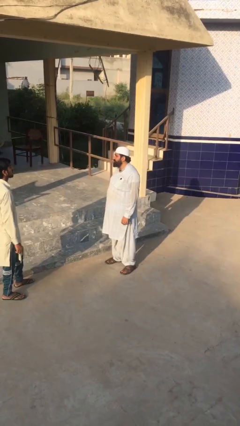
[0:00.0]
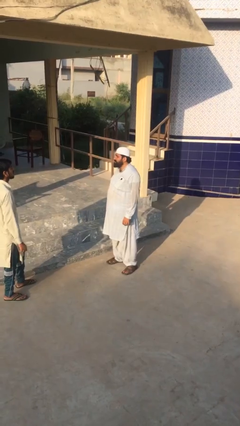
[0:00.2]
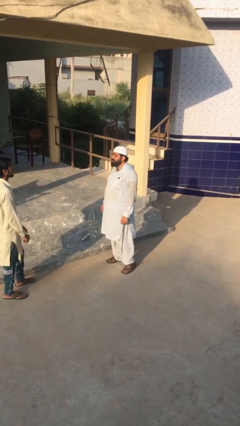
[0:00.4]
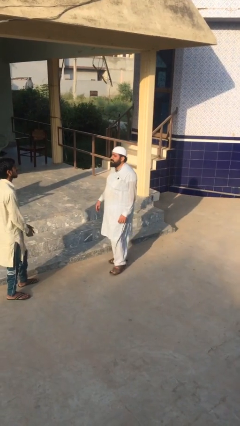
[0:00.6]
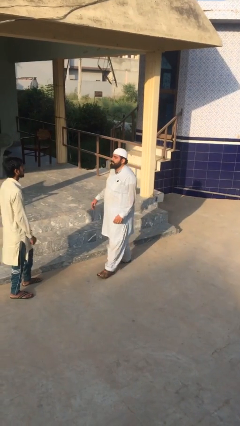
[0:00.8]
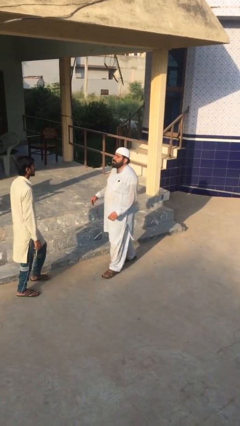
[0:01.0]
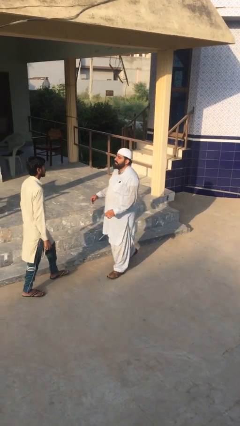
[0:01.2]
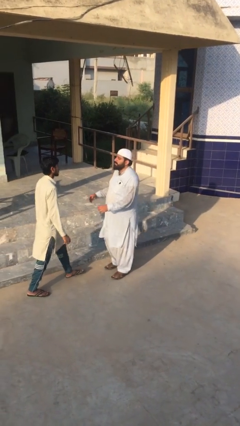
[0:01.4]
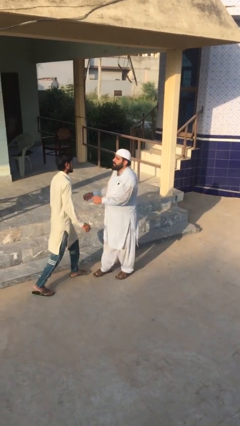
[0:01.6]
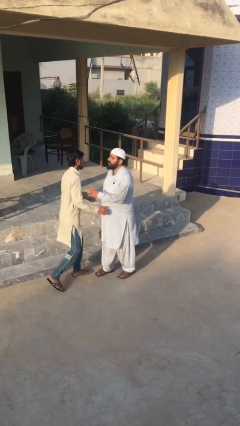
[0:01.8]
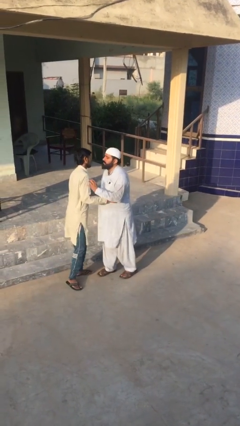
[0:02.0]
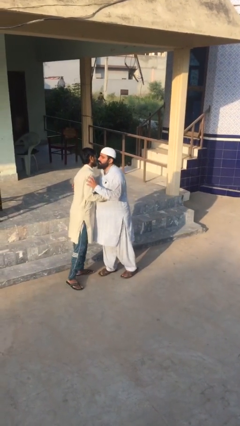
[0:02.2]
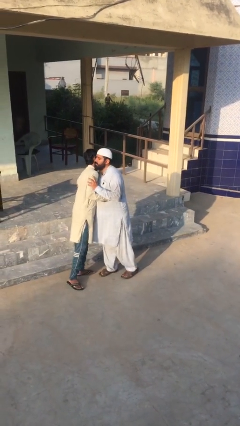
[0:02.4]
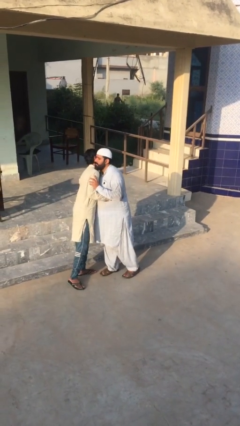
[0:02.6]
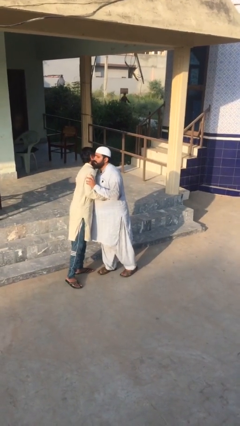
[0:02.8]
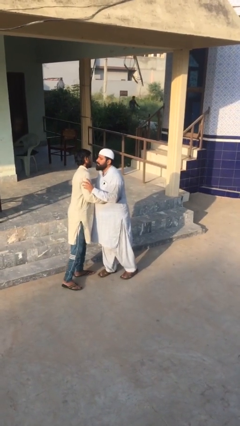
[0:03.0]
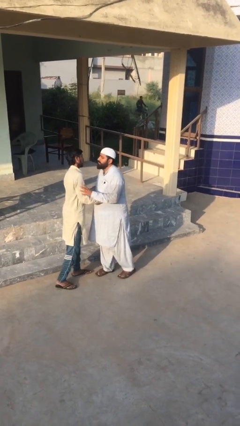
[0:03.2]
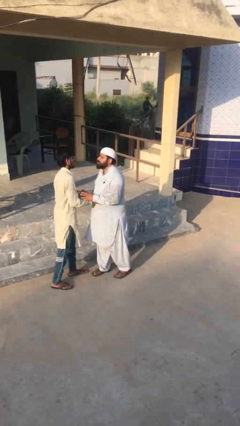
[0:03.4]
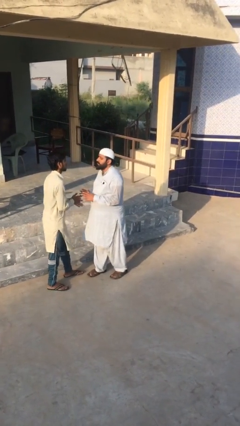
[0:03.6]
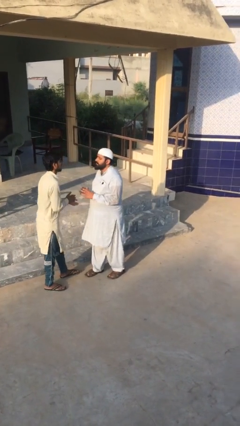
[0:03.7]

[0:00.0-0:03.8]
person embraces person

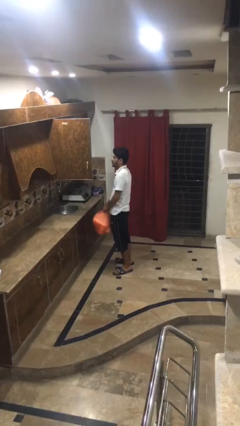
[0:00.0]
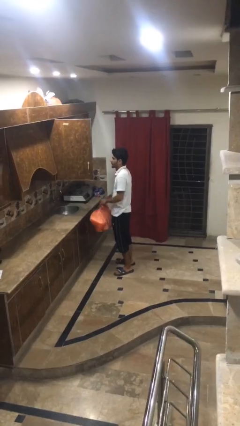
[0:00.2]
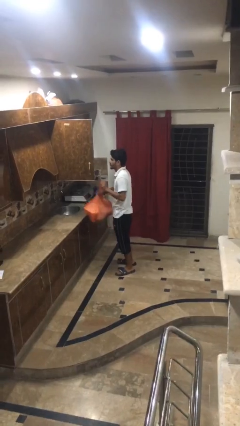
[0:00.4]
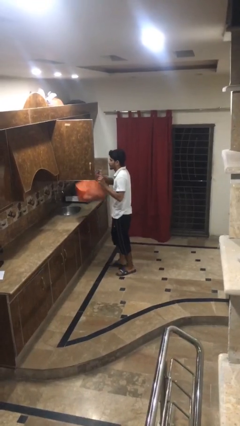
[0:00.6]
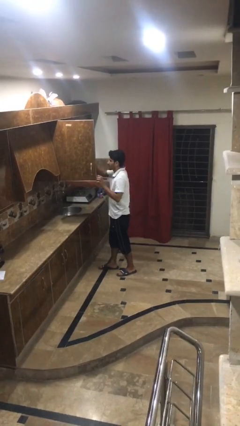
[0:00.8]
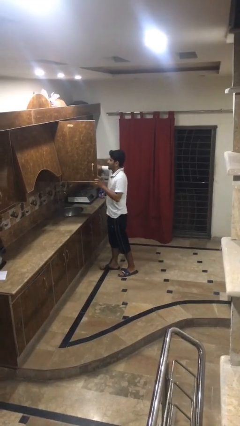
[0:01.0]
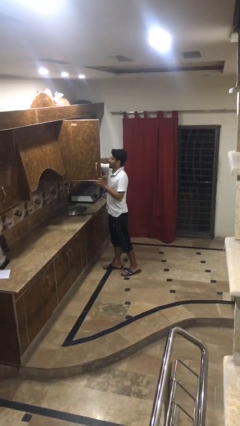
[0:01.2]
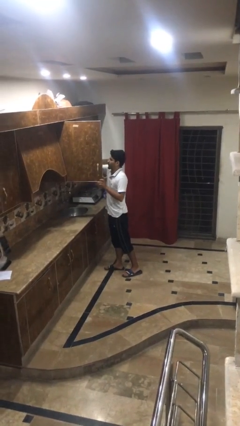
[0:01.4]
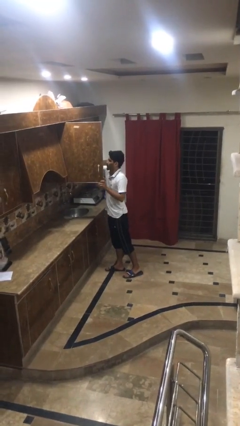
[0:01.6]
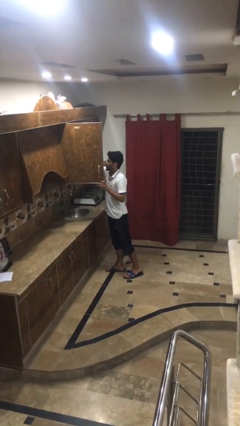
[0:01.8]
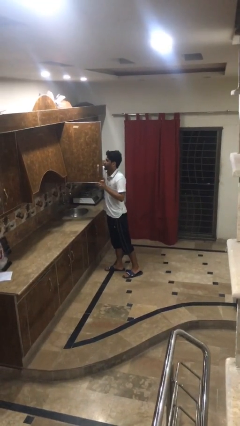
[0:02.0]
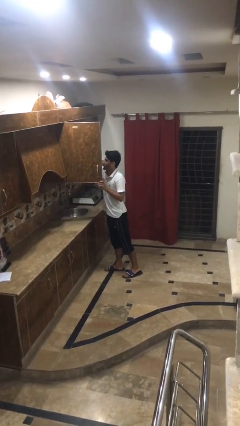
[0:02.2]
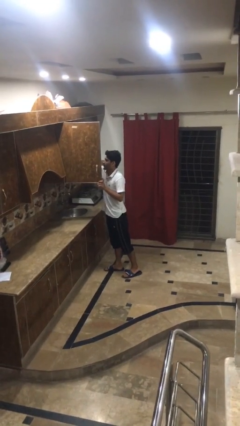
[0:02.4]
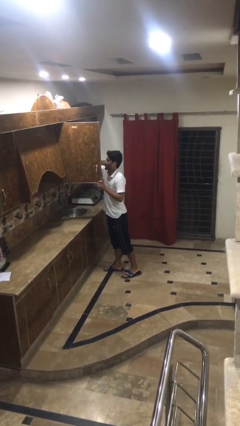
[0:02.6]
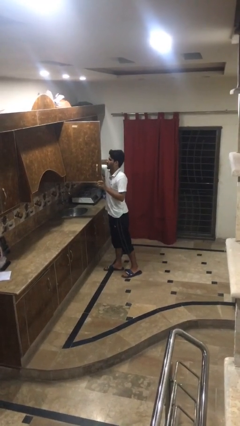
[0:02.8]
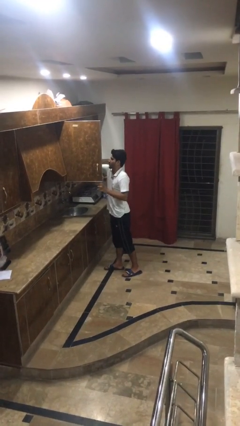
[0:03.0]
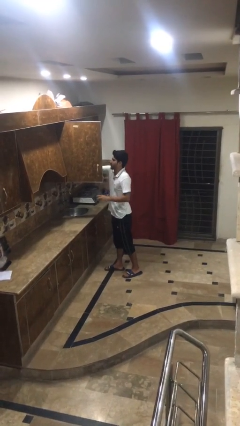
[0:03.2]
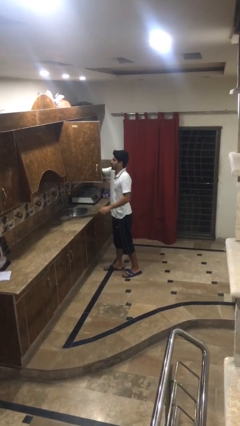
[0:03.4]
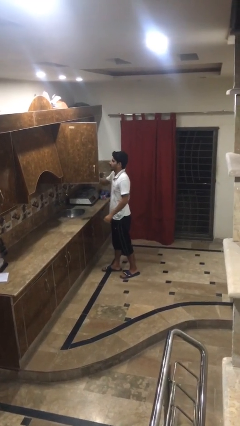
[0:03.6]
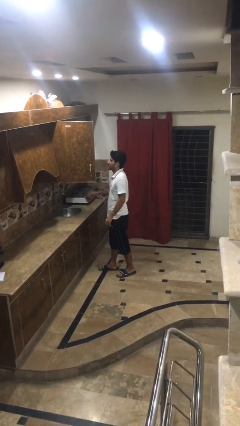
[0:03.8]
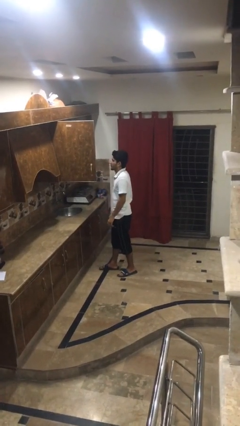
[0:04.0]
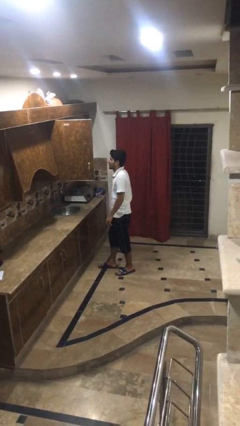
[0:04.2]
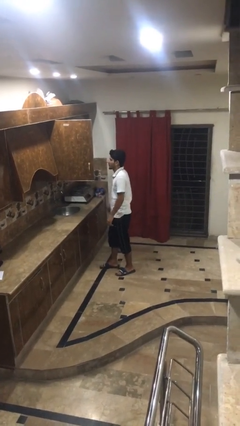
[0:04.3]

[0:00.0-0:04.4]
person loads groceries into cabinet

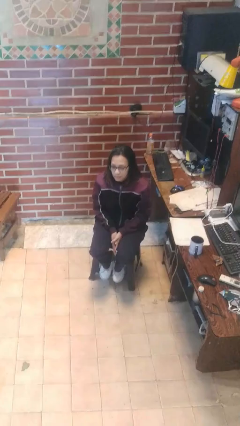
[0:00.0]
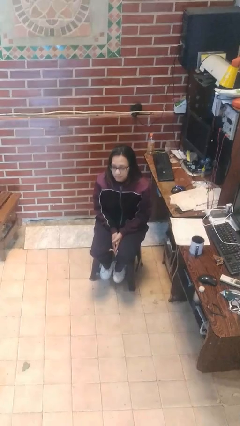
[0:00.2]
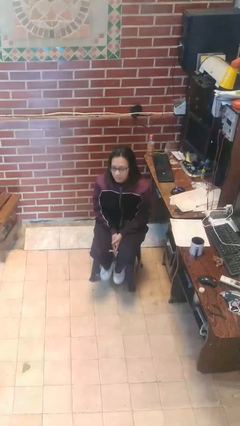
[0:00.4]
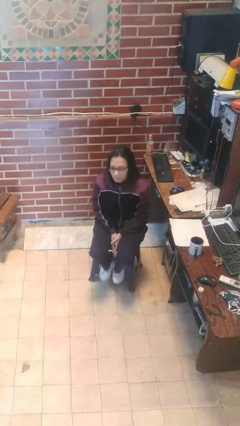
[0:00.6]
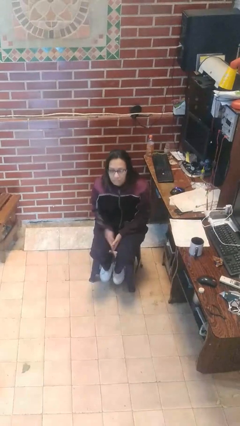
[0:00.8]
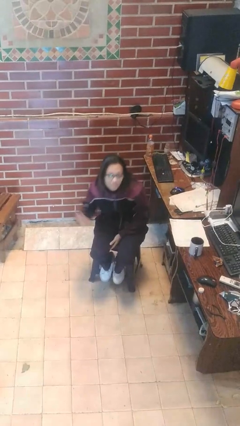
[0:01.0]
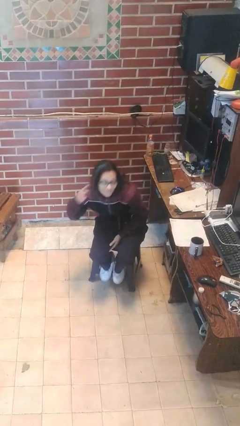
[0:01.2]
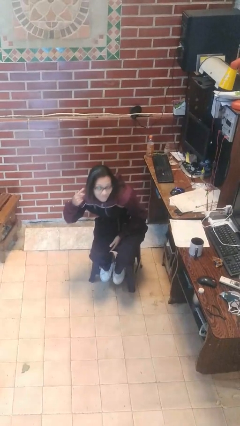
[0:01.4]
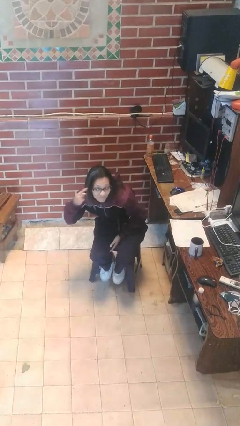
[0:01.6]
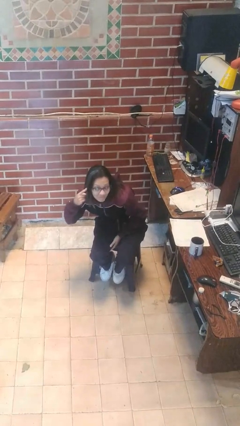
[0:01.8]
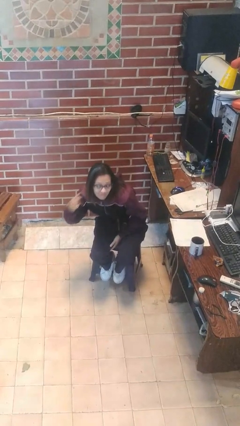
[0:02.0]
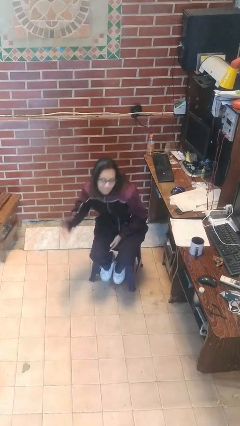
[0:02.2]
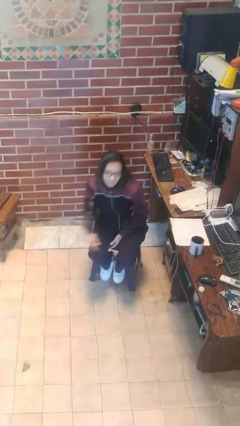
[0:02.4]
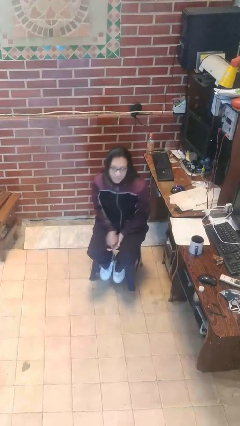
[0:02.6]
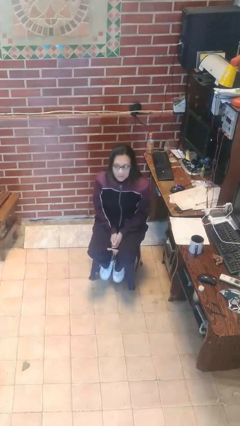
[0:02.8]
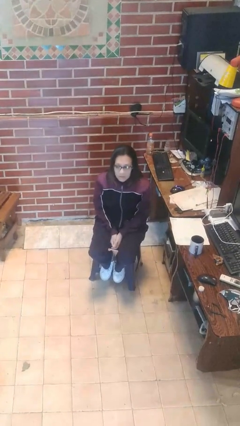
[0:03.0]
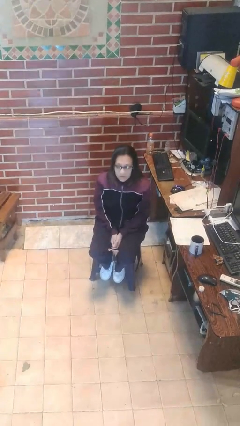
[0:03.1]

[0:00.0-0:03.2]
person gestures listen closely

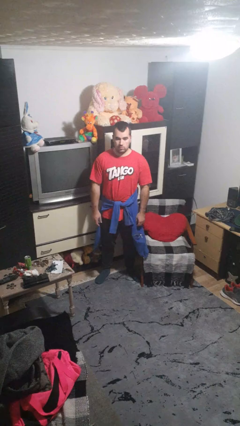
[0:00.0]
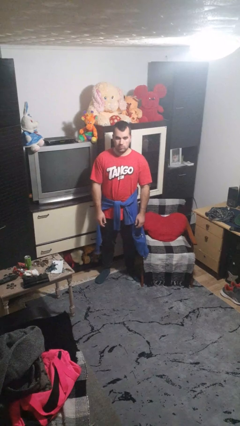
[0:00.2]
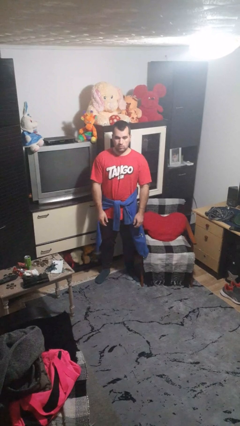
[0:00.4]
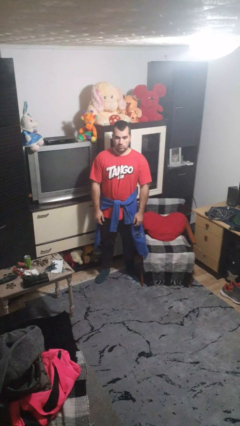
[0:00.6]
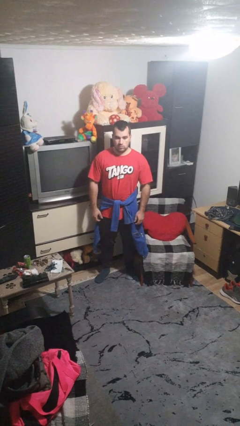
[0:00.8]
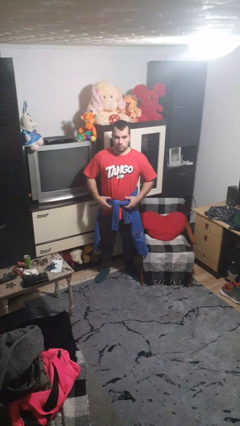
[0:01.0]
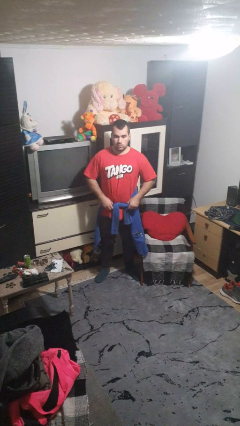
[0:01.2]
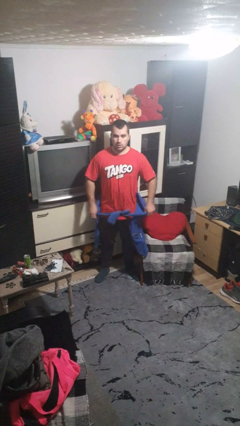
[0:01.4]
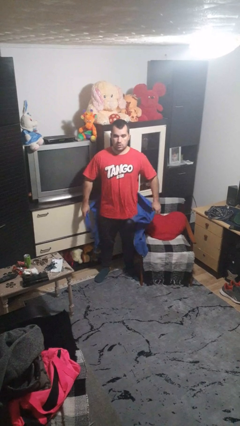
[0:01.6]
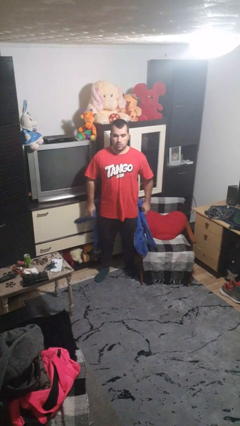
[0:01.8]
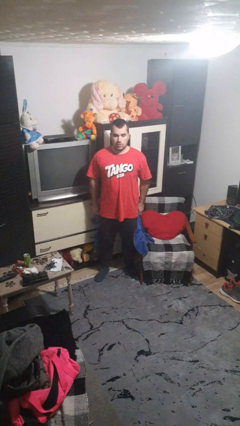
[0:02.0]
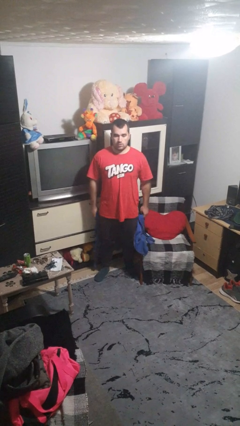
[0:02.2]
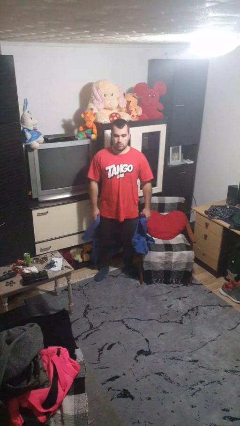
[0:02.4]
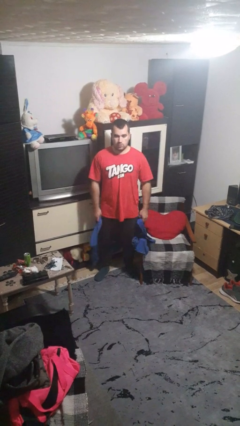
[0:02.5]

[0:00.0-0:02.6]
person unties jacket around waist

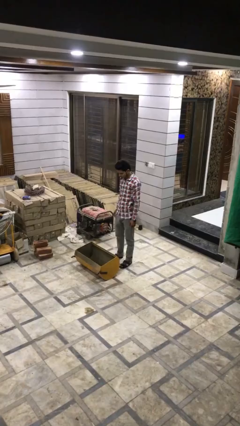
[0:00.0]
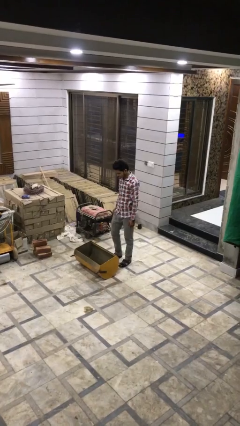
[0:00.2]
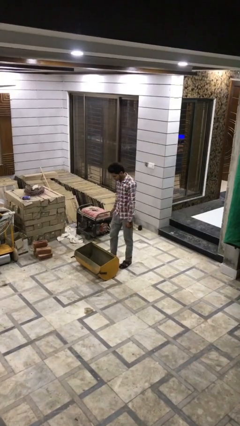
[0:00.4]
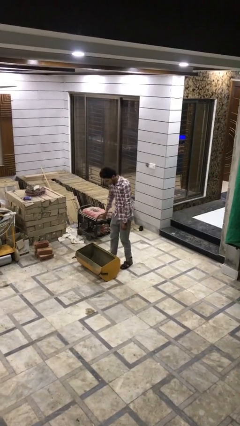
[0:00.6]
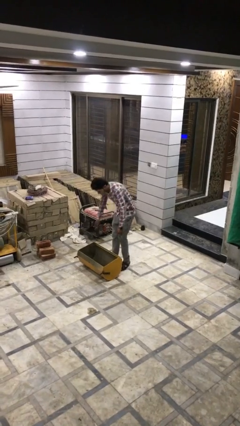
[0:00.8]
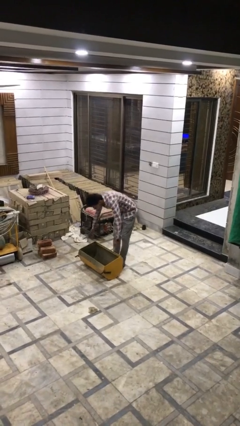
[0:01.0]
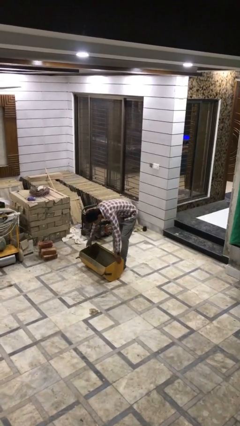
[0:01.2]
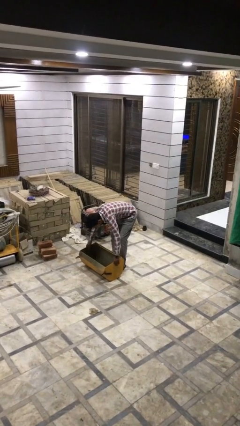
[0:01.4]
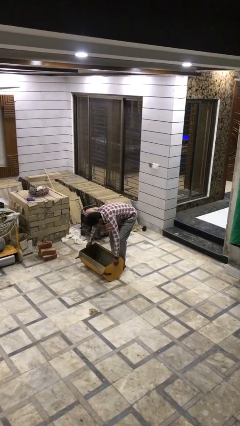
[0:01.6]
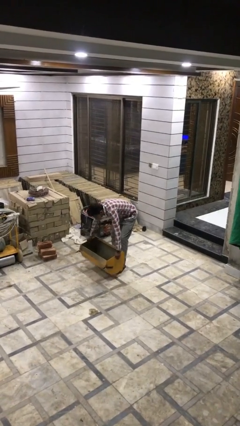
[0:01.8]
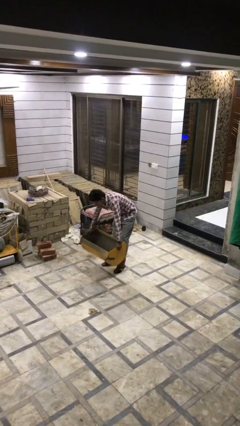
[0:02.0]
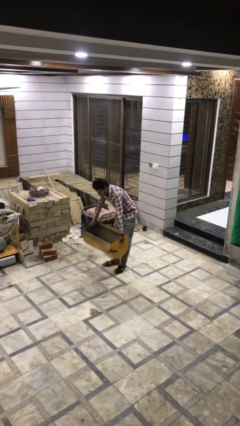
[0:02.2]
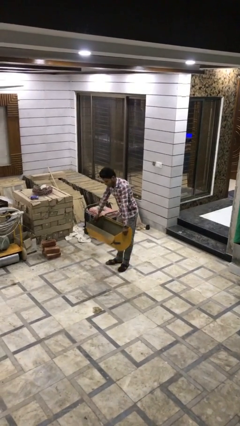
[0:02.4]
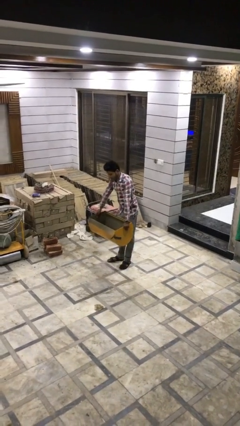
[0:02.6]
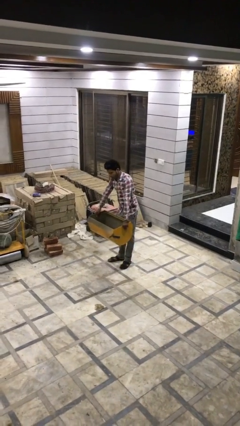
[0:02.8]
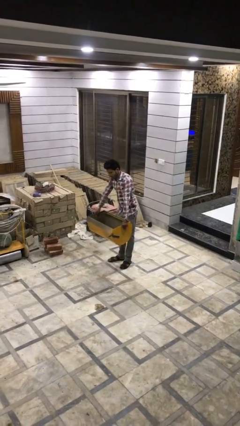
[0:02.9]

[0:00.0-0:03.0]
person picks up object from floor

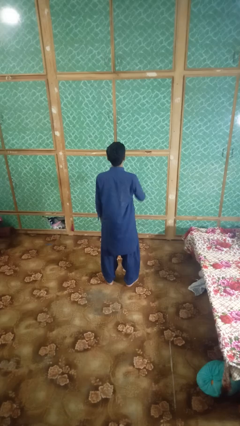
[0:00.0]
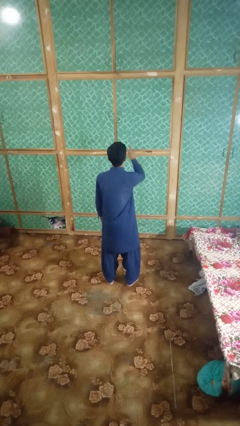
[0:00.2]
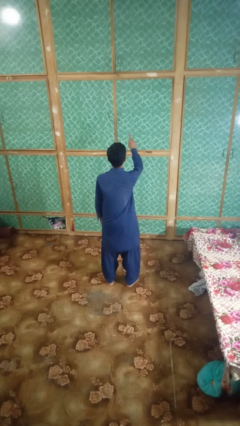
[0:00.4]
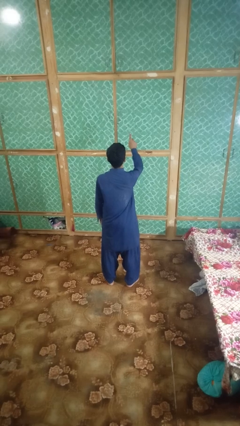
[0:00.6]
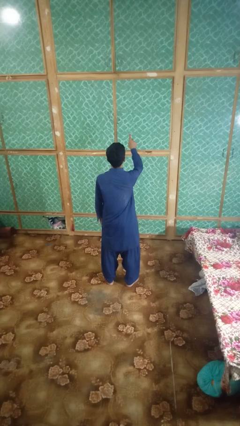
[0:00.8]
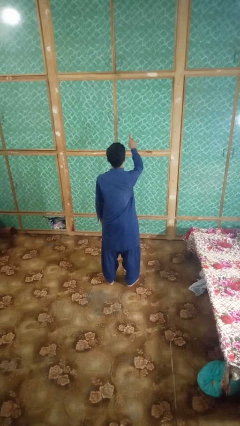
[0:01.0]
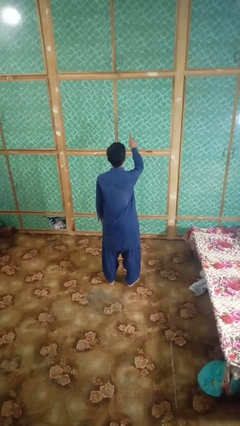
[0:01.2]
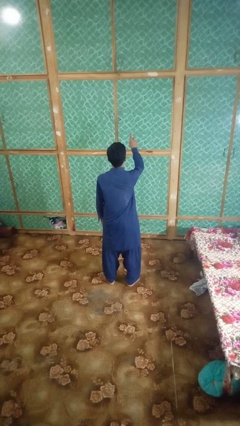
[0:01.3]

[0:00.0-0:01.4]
person gestures number one
